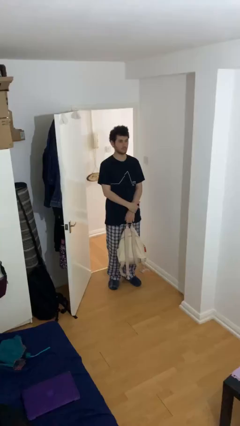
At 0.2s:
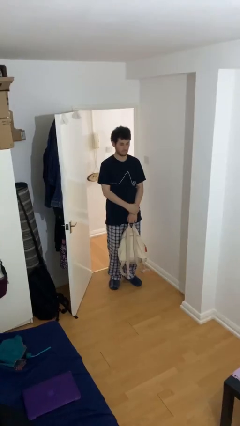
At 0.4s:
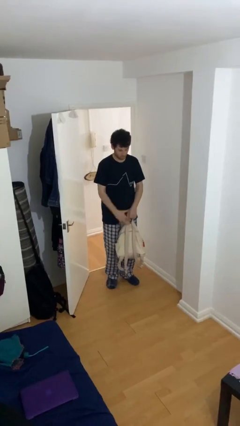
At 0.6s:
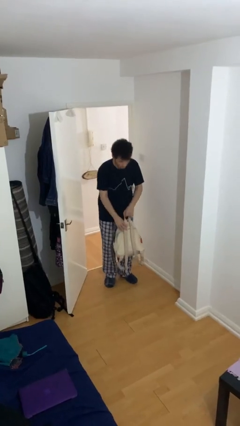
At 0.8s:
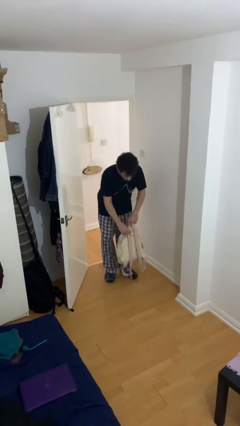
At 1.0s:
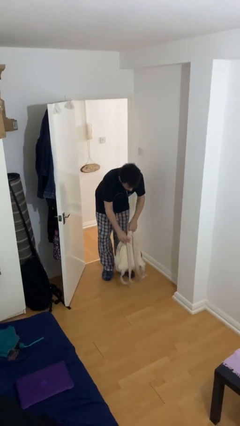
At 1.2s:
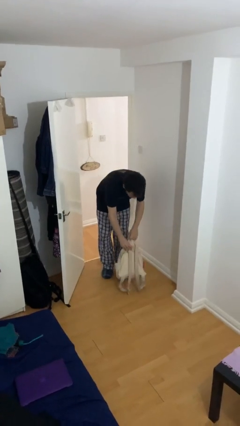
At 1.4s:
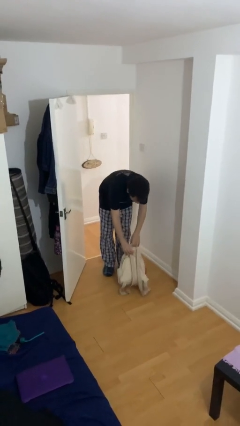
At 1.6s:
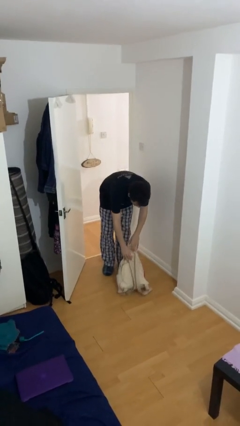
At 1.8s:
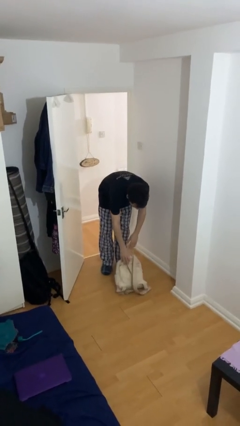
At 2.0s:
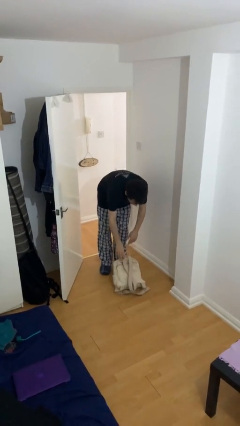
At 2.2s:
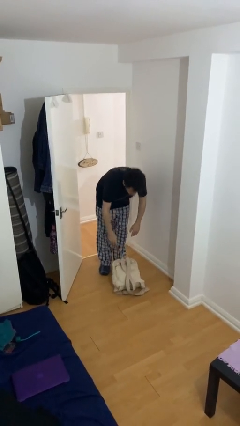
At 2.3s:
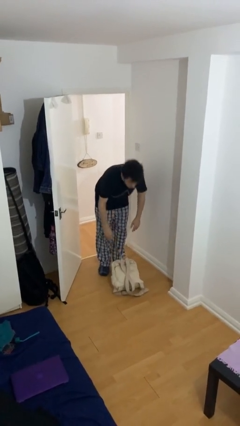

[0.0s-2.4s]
person puts down object on floor

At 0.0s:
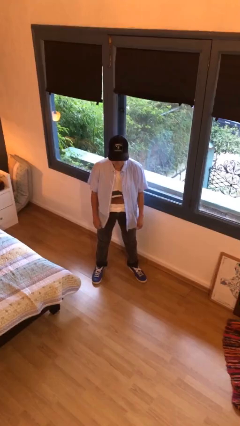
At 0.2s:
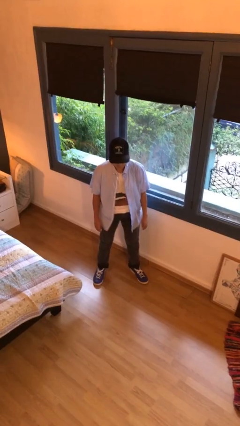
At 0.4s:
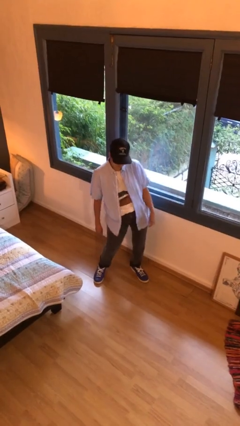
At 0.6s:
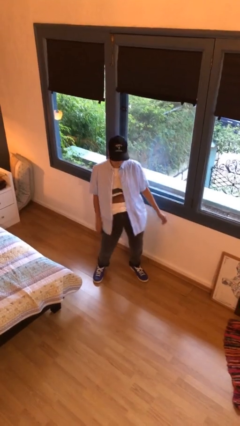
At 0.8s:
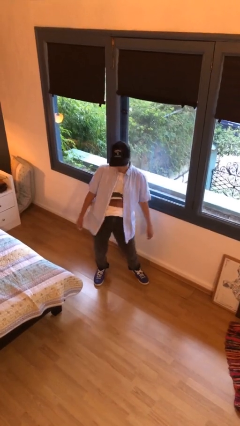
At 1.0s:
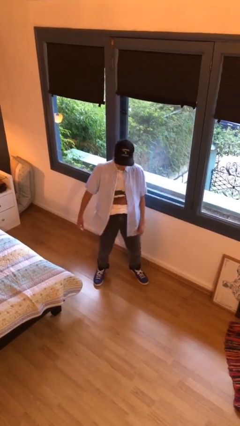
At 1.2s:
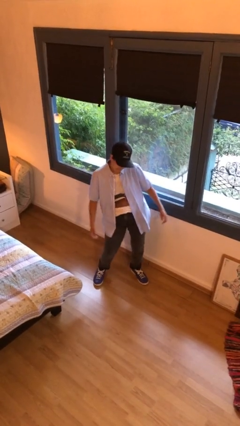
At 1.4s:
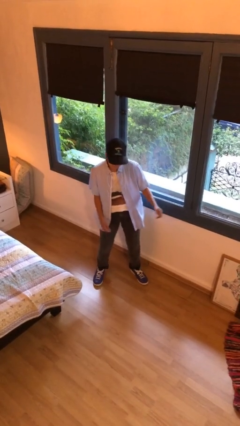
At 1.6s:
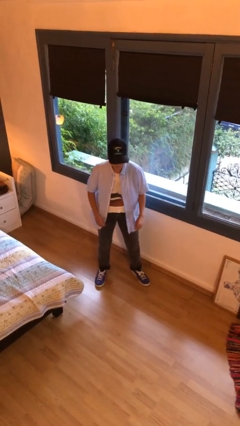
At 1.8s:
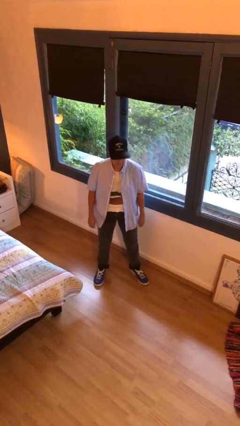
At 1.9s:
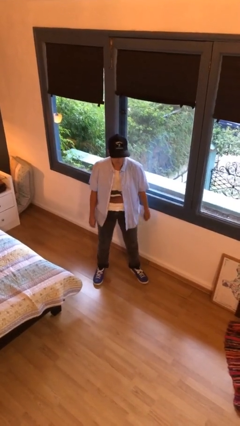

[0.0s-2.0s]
person wiggles hips

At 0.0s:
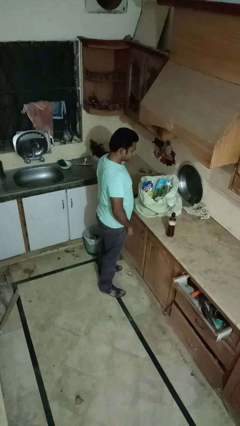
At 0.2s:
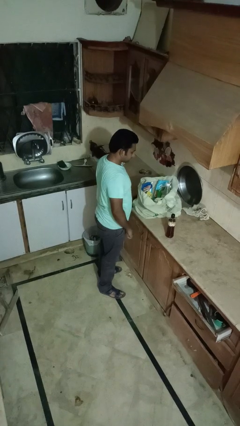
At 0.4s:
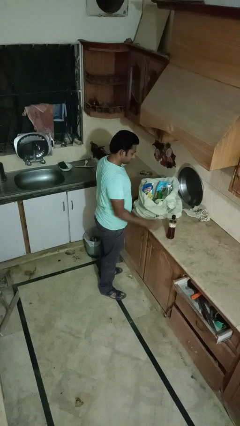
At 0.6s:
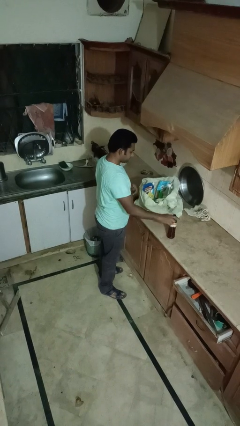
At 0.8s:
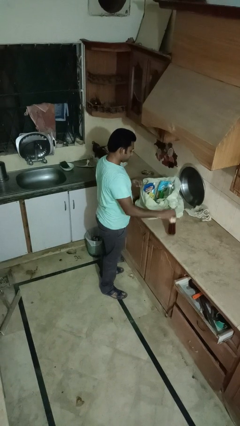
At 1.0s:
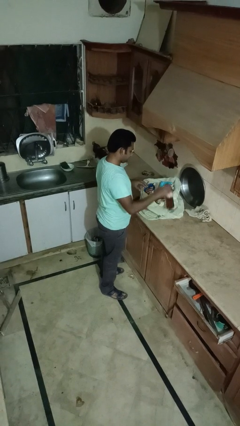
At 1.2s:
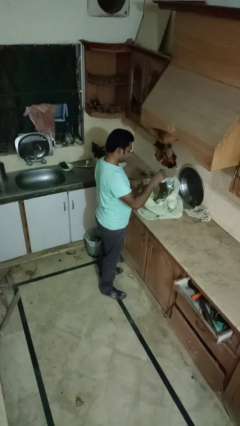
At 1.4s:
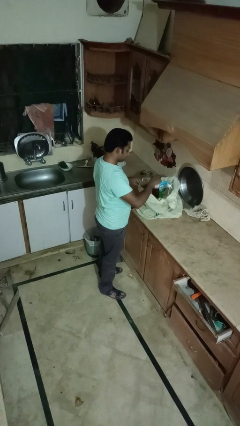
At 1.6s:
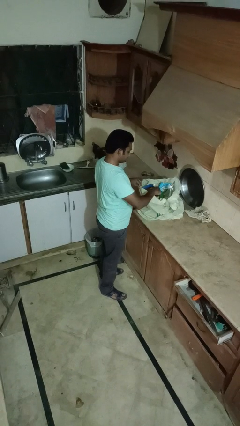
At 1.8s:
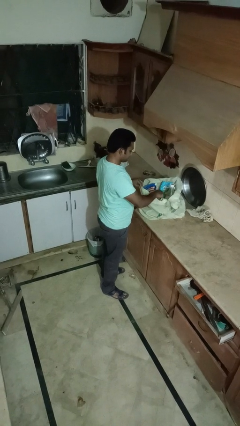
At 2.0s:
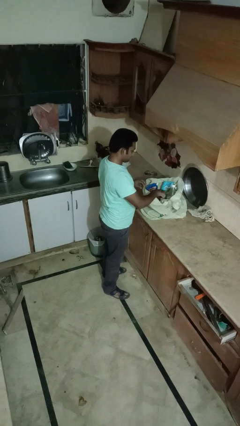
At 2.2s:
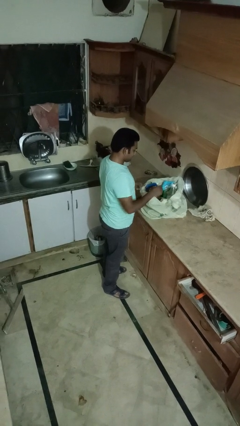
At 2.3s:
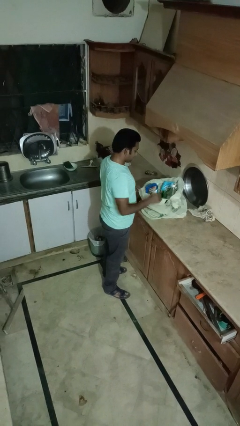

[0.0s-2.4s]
person puts object into bag

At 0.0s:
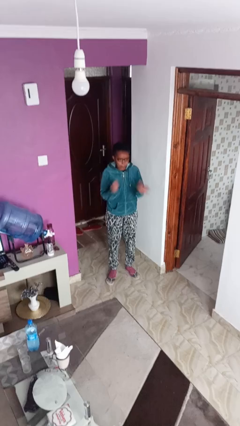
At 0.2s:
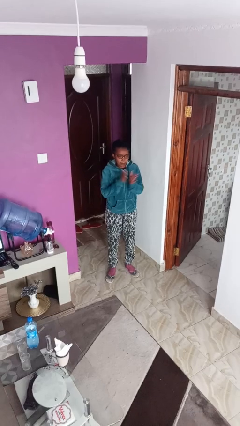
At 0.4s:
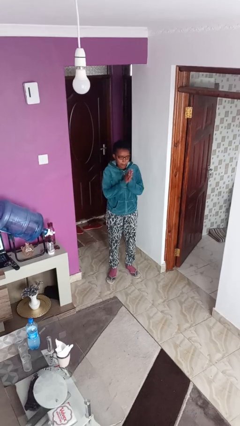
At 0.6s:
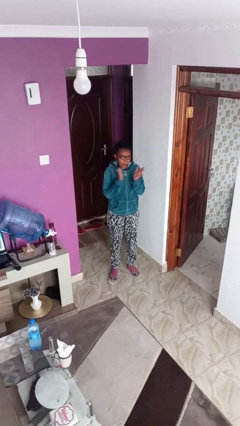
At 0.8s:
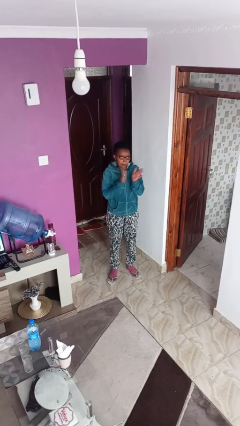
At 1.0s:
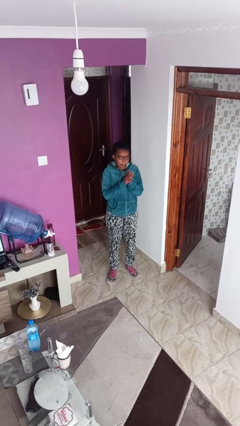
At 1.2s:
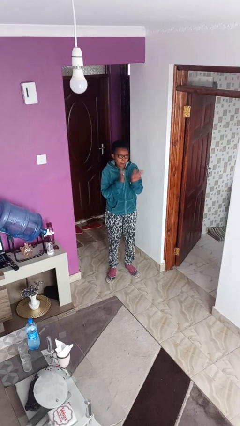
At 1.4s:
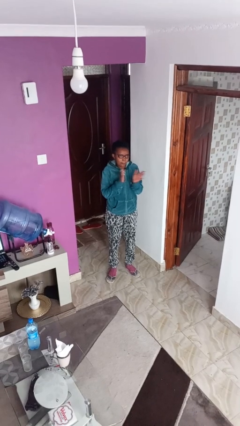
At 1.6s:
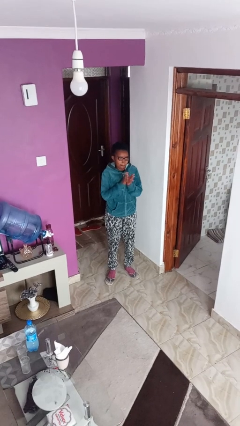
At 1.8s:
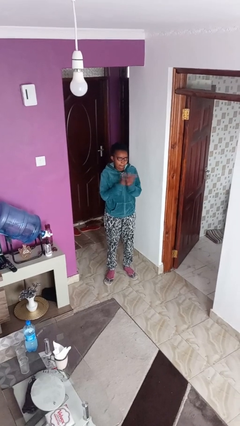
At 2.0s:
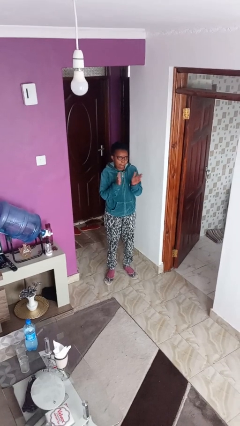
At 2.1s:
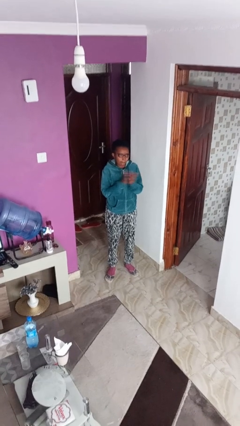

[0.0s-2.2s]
person claps hands

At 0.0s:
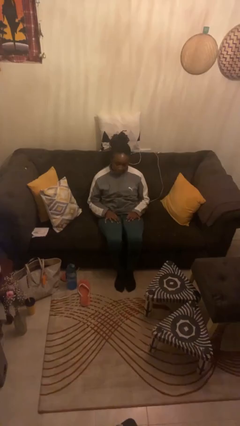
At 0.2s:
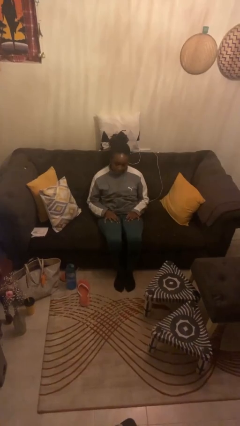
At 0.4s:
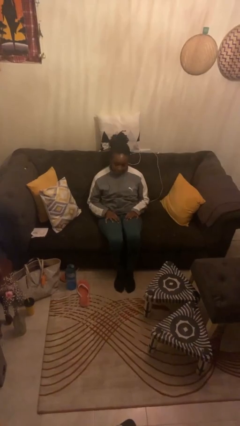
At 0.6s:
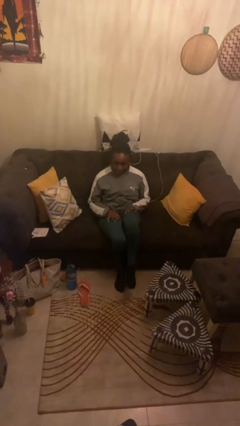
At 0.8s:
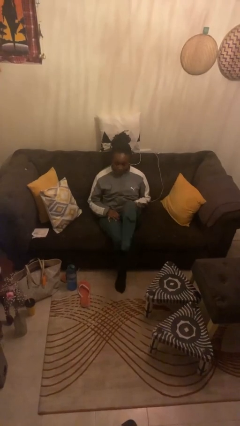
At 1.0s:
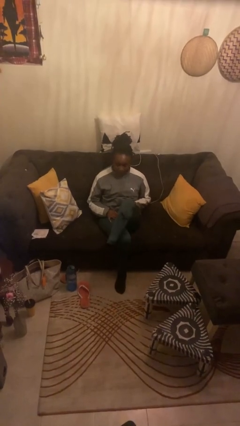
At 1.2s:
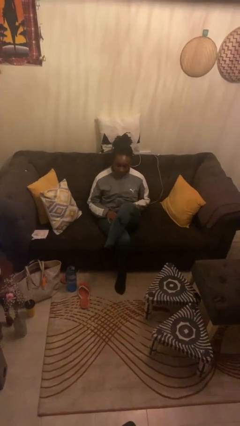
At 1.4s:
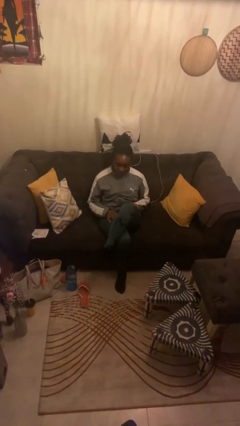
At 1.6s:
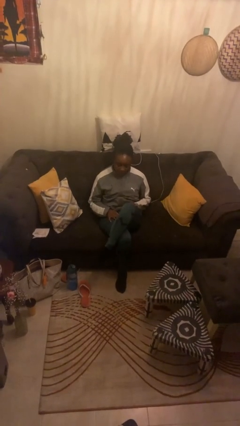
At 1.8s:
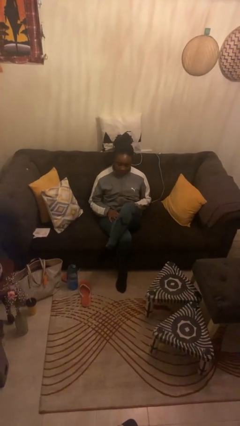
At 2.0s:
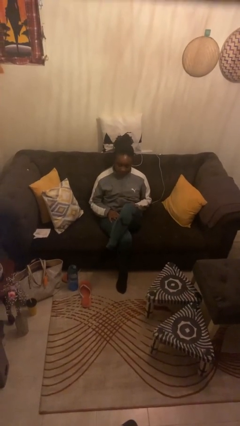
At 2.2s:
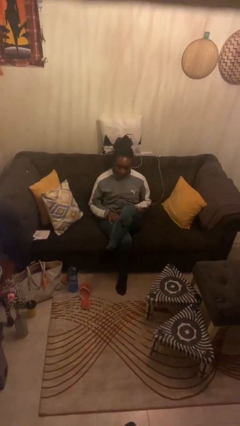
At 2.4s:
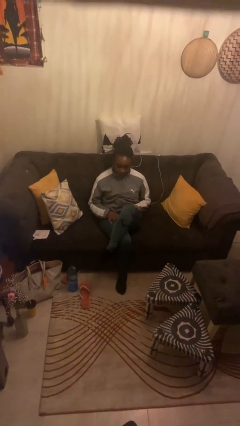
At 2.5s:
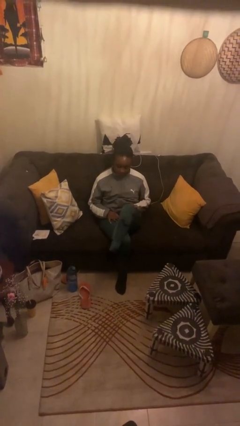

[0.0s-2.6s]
person crosses legs

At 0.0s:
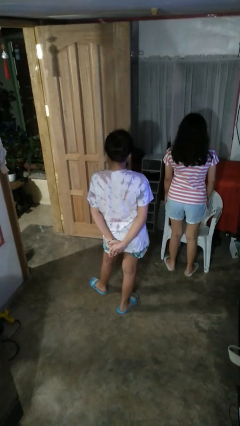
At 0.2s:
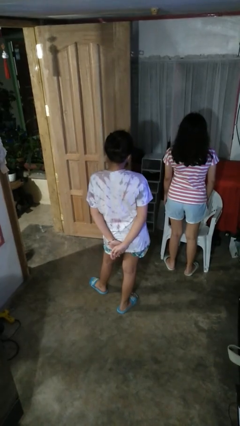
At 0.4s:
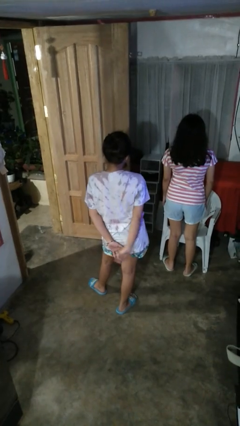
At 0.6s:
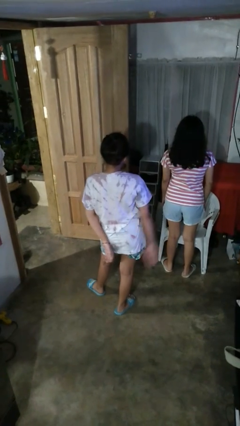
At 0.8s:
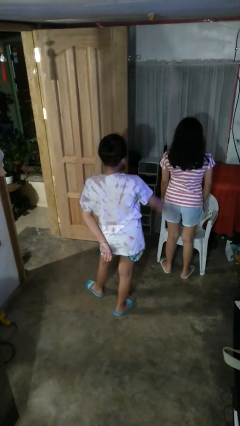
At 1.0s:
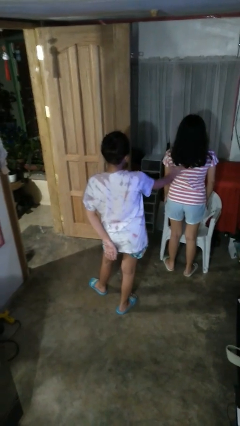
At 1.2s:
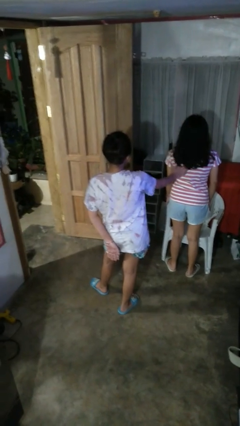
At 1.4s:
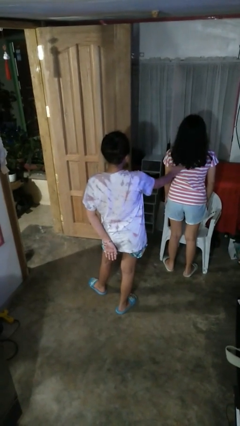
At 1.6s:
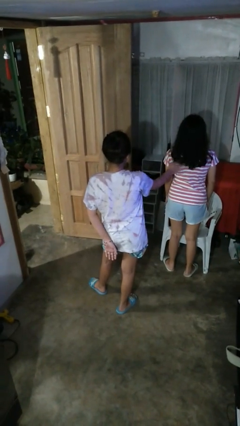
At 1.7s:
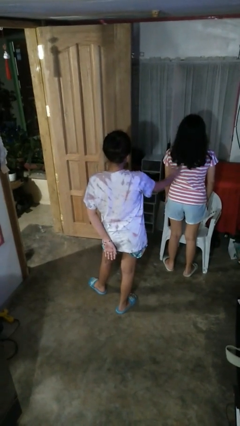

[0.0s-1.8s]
person touches back of person

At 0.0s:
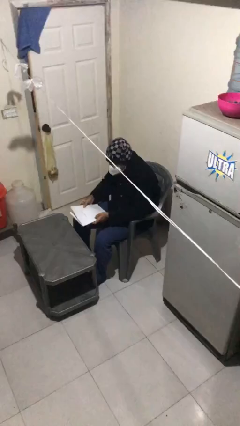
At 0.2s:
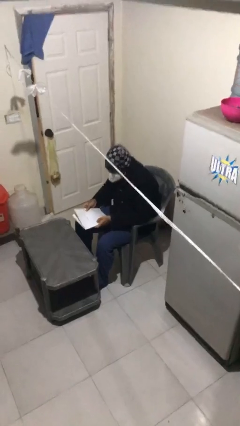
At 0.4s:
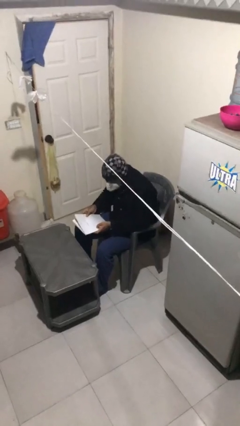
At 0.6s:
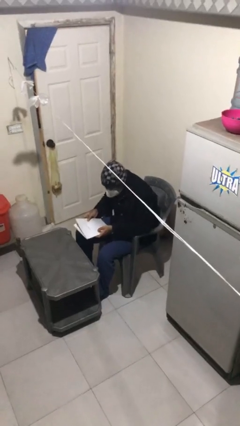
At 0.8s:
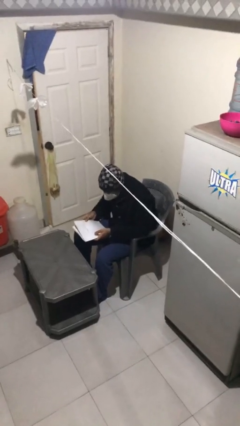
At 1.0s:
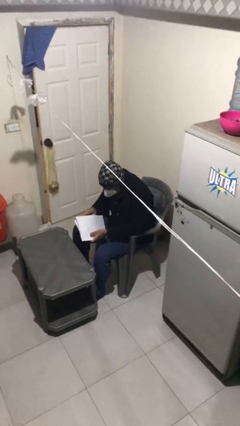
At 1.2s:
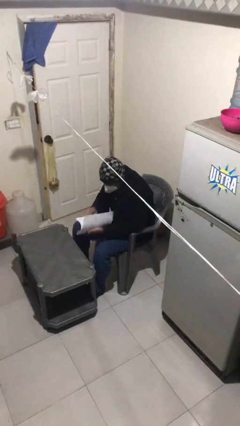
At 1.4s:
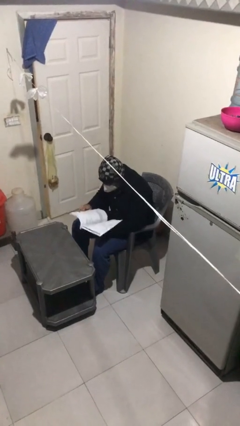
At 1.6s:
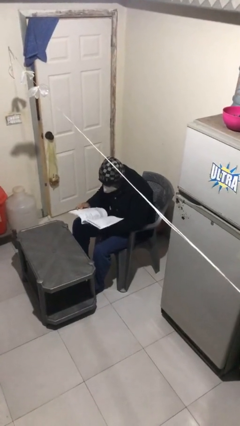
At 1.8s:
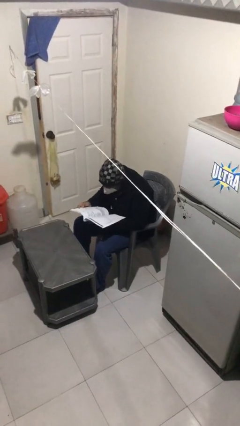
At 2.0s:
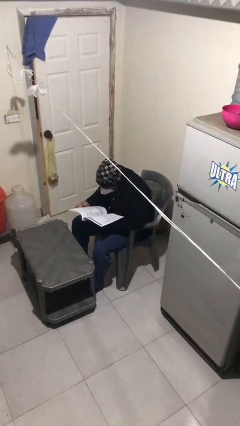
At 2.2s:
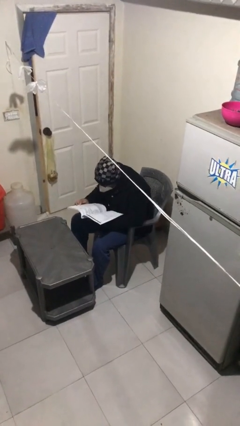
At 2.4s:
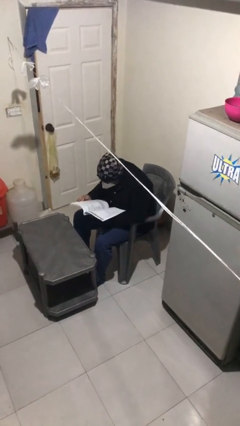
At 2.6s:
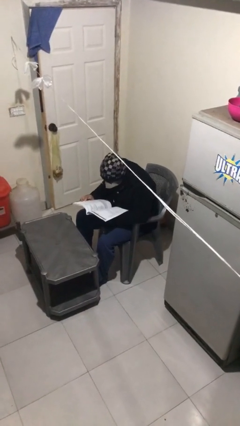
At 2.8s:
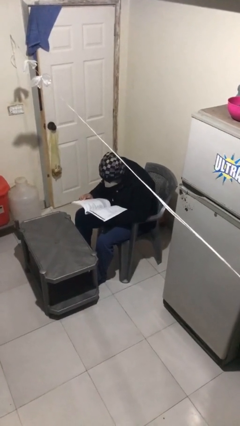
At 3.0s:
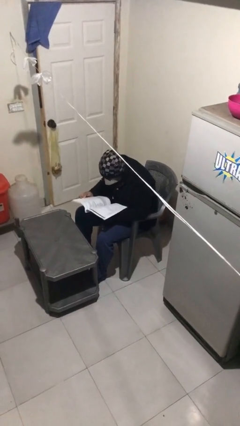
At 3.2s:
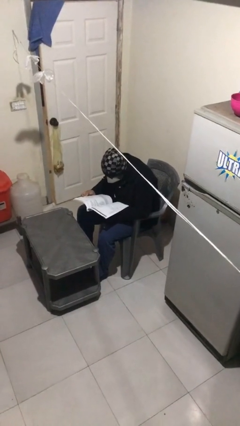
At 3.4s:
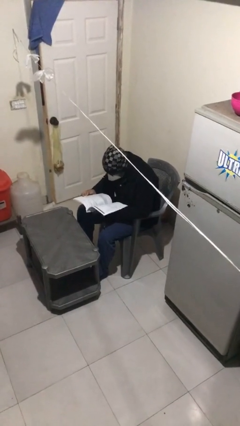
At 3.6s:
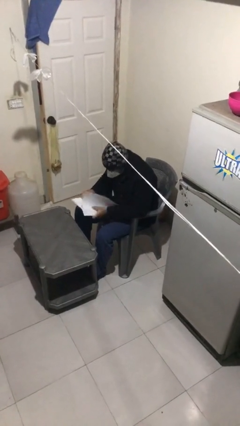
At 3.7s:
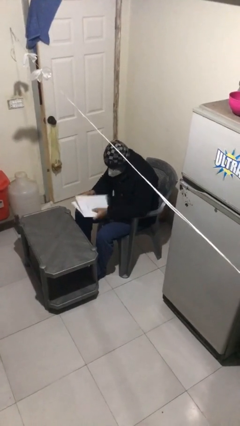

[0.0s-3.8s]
person reads document

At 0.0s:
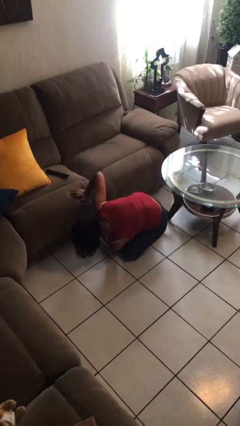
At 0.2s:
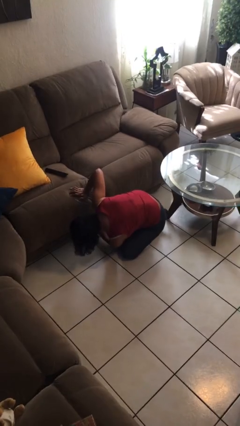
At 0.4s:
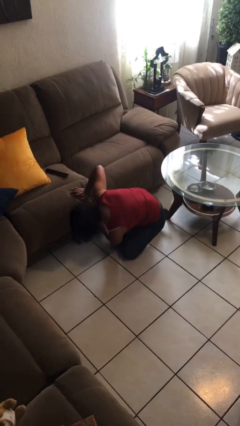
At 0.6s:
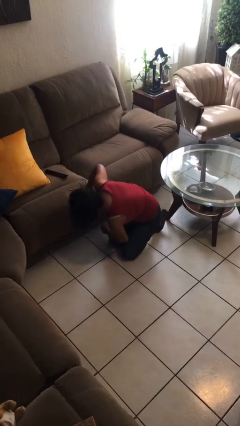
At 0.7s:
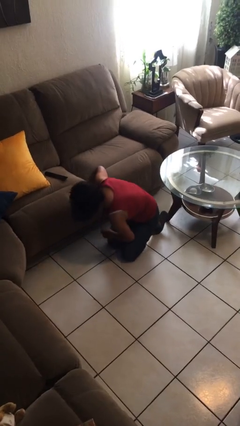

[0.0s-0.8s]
person searches under couch
